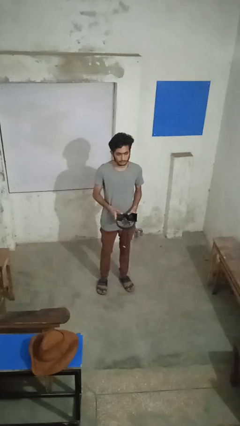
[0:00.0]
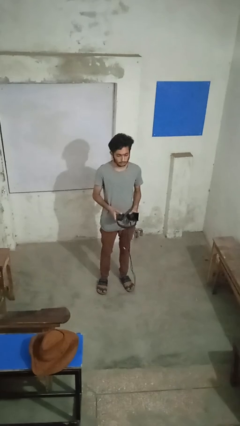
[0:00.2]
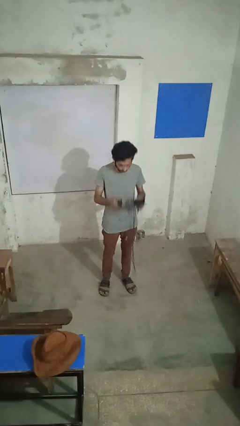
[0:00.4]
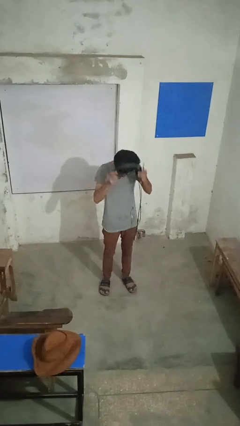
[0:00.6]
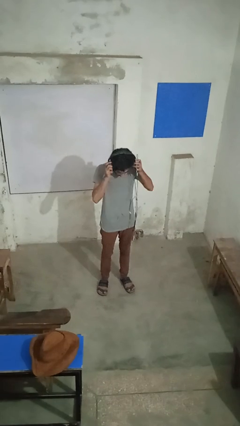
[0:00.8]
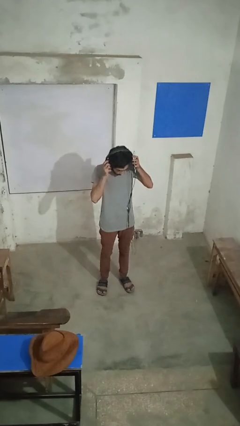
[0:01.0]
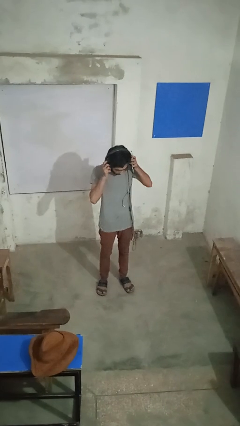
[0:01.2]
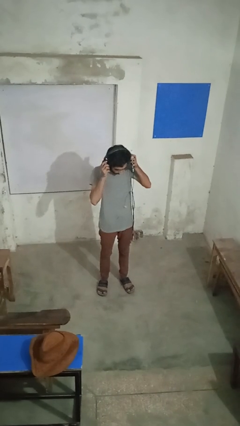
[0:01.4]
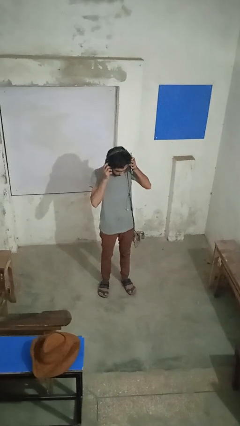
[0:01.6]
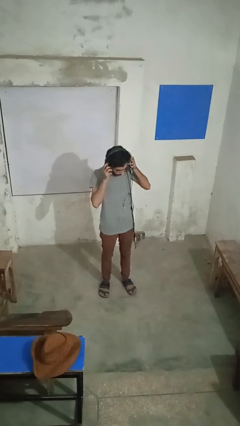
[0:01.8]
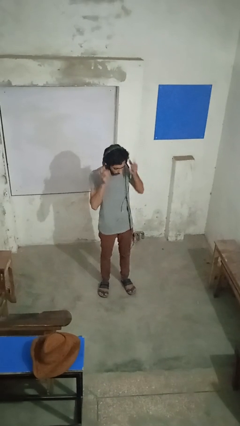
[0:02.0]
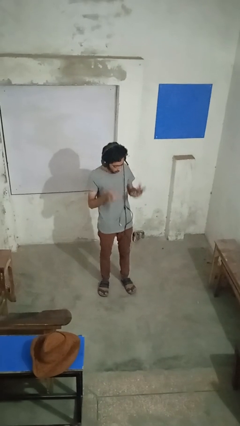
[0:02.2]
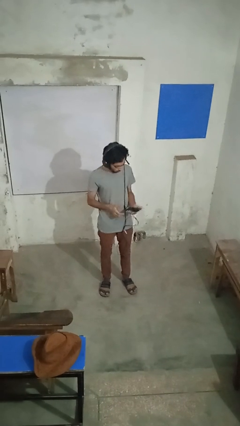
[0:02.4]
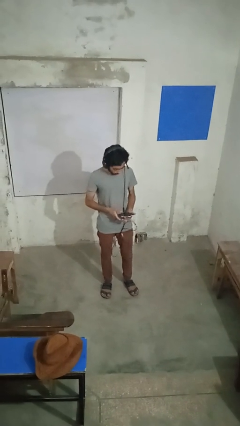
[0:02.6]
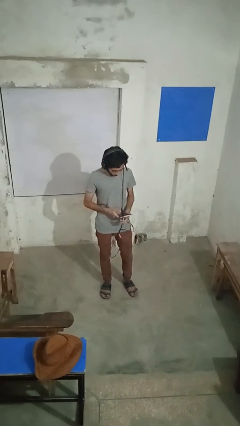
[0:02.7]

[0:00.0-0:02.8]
person puts on headphones

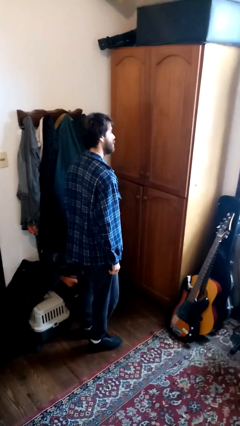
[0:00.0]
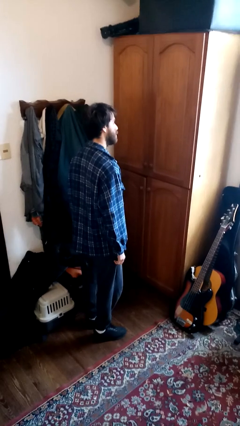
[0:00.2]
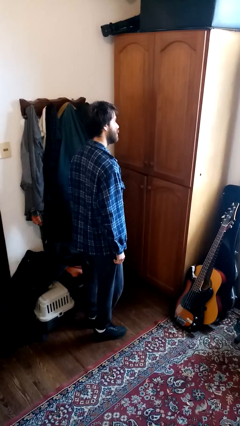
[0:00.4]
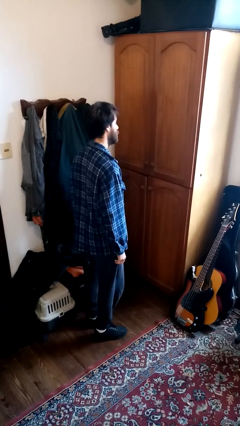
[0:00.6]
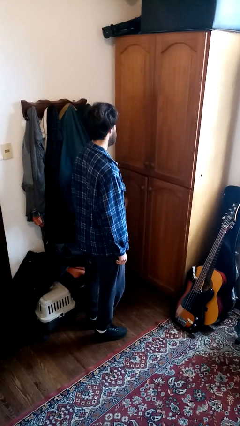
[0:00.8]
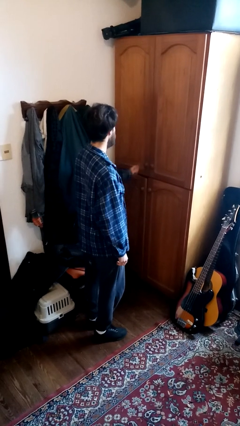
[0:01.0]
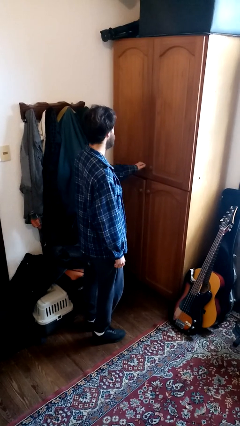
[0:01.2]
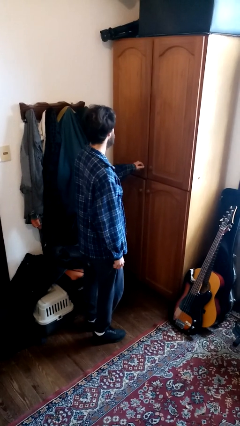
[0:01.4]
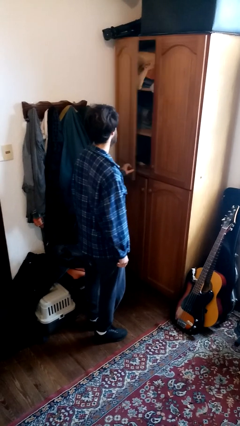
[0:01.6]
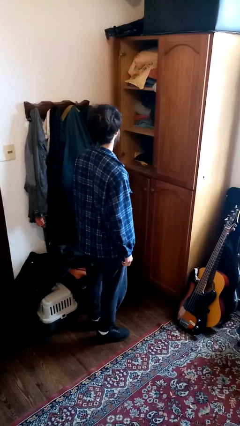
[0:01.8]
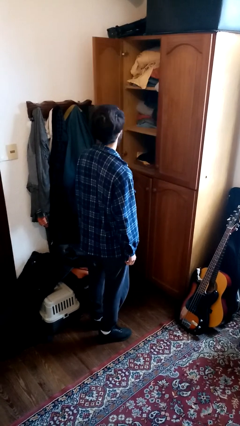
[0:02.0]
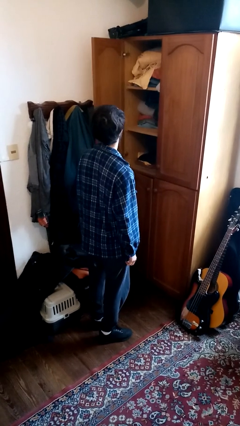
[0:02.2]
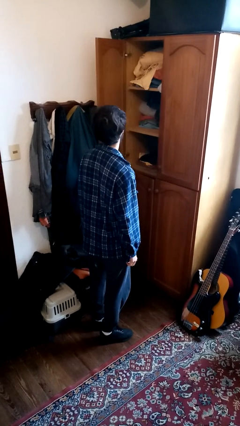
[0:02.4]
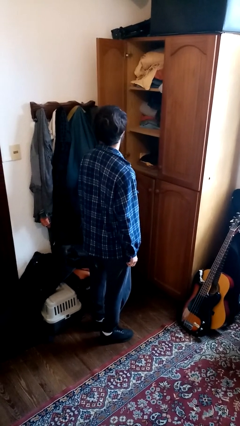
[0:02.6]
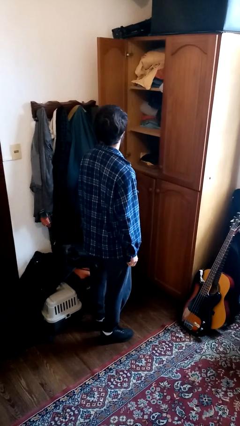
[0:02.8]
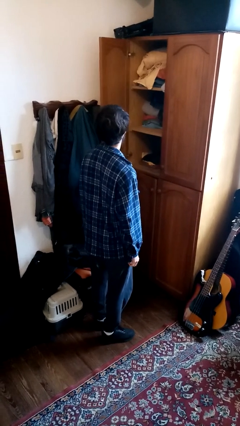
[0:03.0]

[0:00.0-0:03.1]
person opens dresser drawer

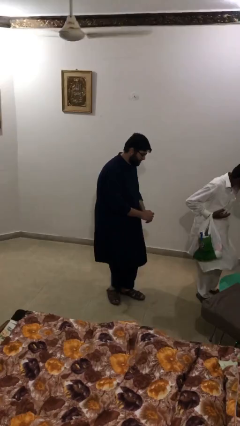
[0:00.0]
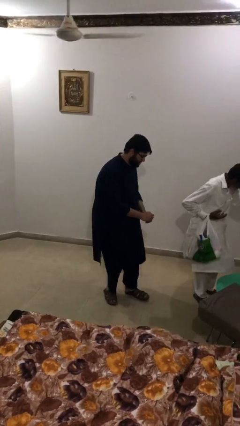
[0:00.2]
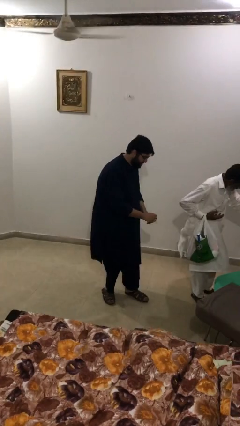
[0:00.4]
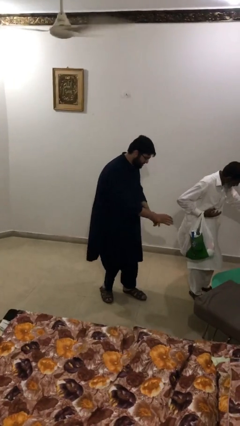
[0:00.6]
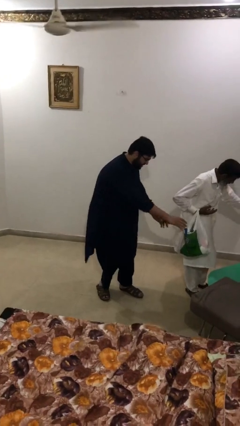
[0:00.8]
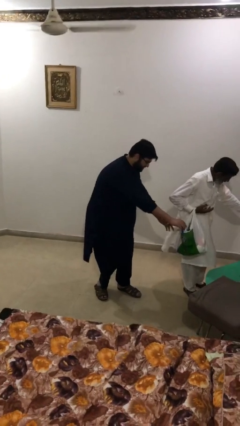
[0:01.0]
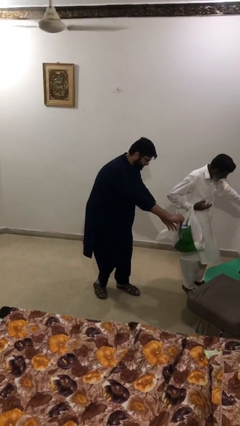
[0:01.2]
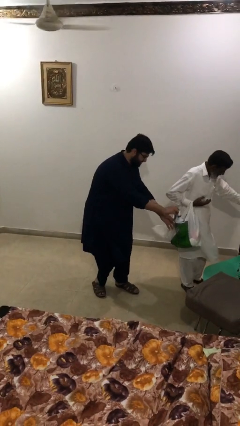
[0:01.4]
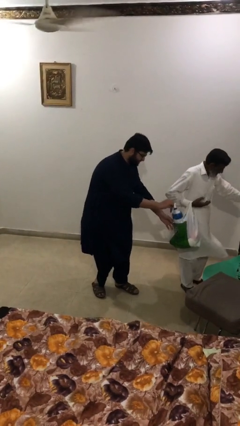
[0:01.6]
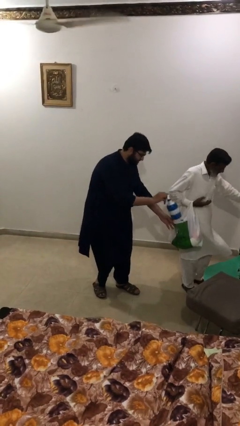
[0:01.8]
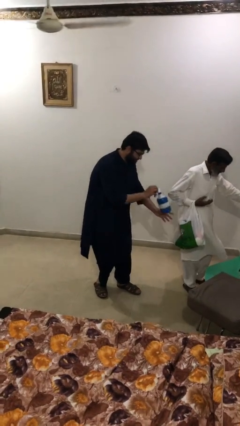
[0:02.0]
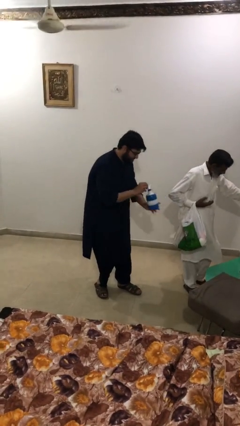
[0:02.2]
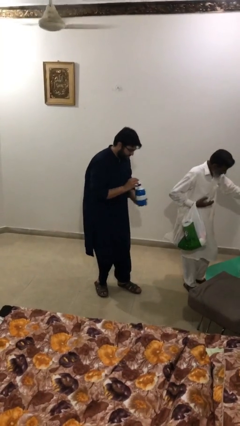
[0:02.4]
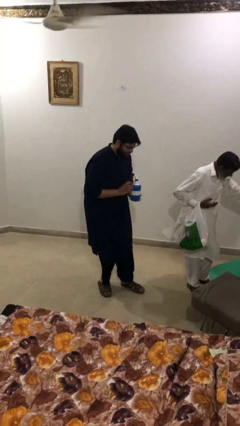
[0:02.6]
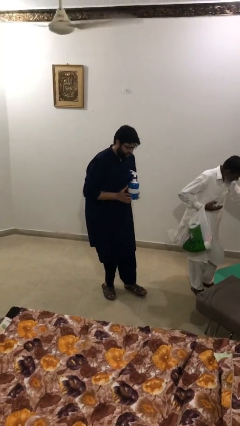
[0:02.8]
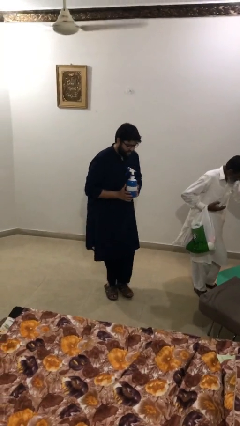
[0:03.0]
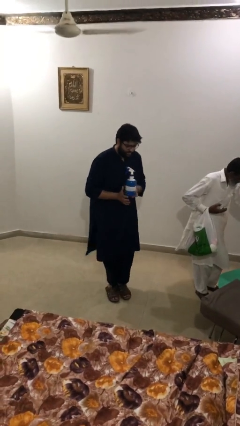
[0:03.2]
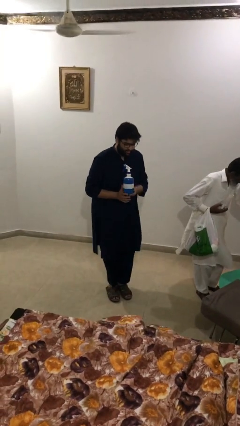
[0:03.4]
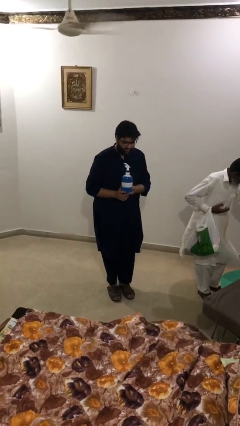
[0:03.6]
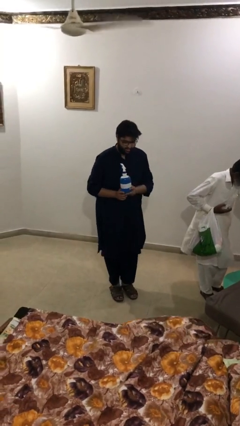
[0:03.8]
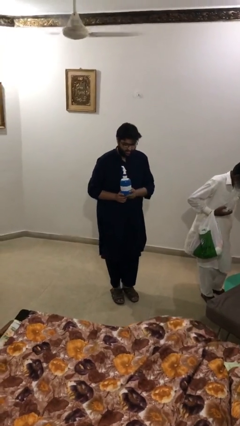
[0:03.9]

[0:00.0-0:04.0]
person steals object from person

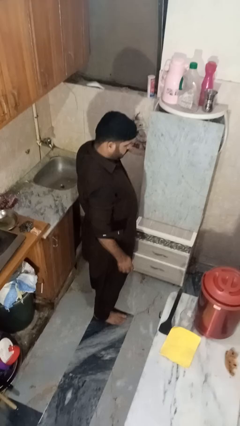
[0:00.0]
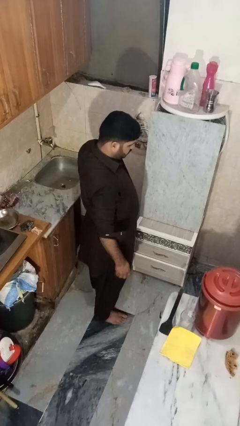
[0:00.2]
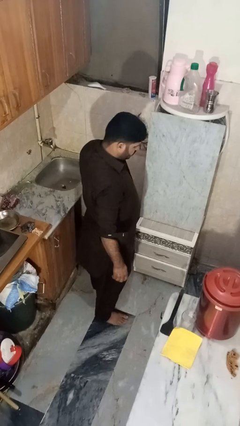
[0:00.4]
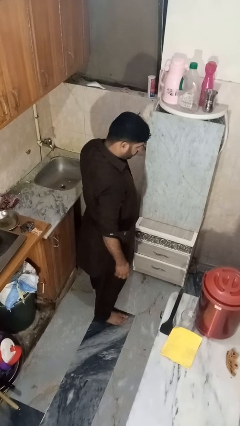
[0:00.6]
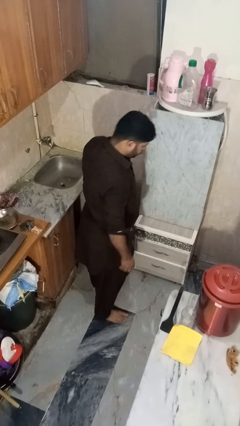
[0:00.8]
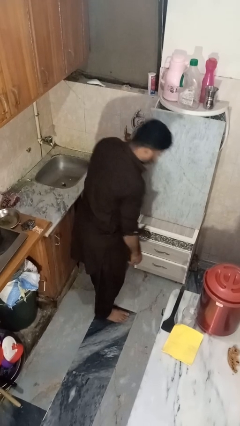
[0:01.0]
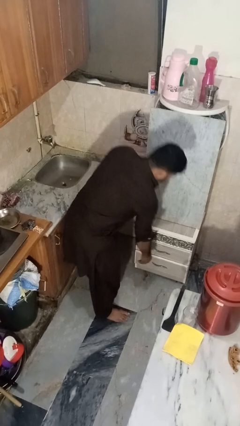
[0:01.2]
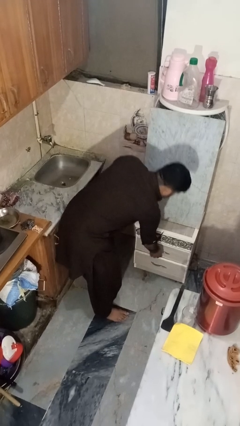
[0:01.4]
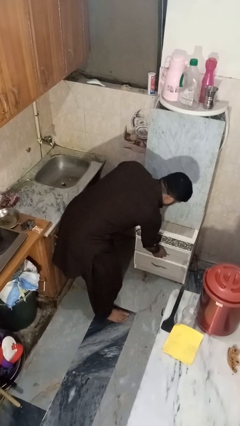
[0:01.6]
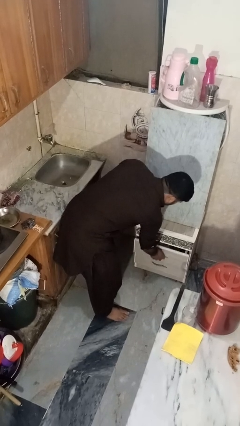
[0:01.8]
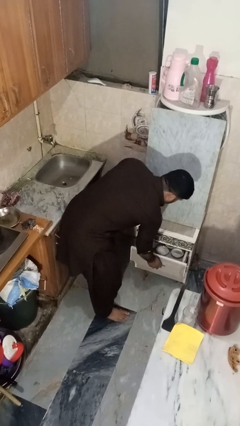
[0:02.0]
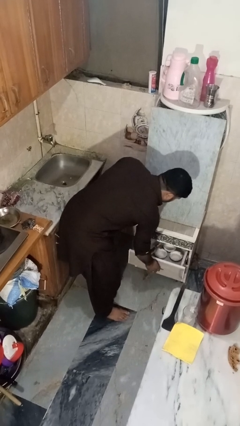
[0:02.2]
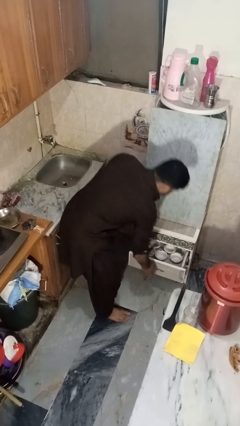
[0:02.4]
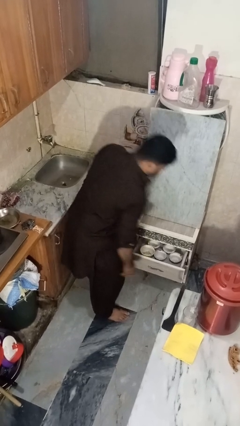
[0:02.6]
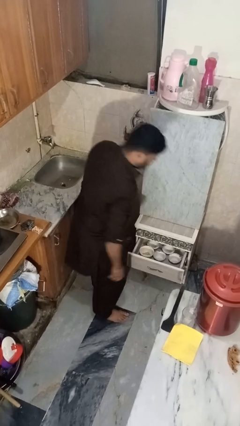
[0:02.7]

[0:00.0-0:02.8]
person opens kitchen drawer

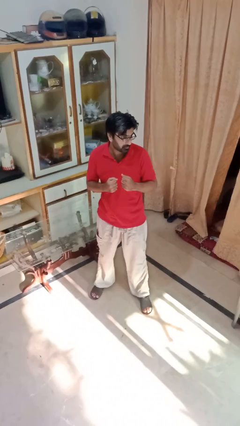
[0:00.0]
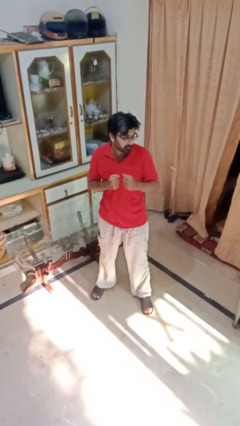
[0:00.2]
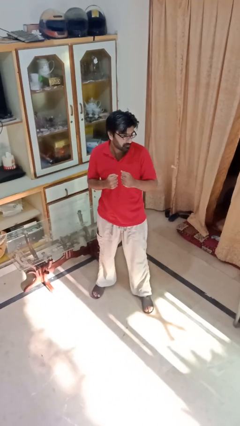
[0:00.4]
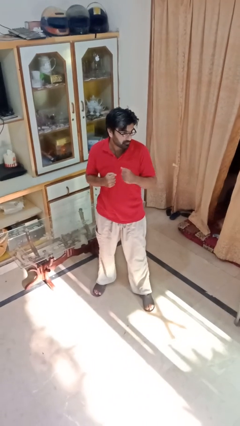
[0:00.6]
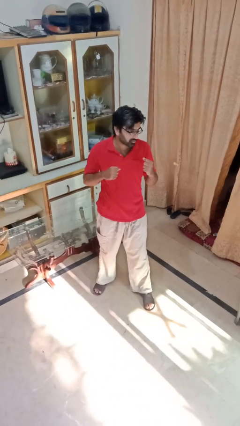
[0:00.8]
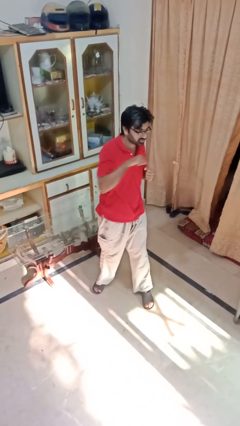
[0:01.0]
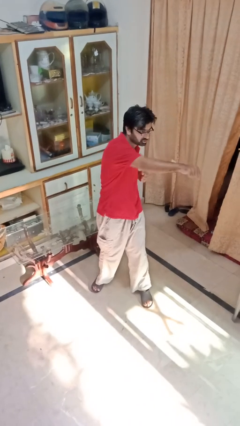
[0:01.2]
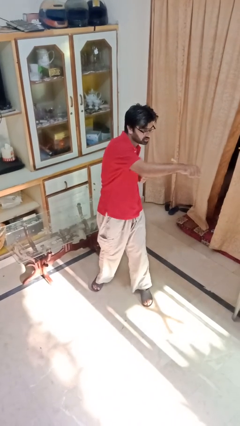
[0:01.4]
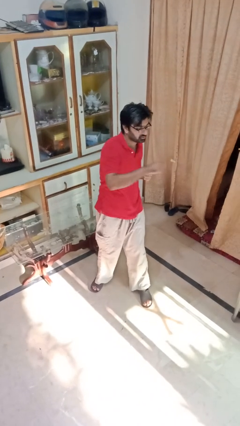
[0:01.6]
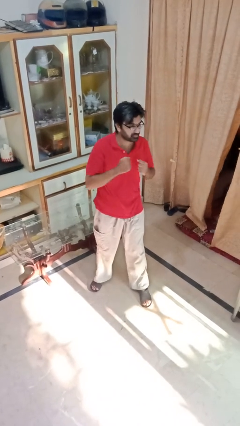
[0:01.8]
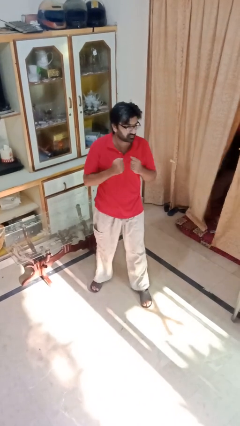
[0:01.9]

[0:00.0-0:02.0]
person punches

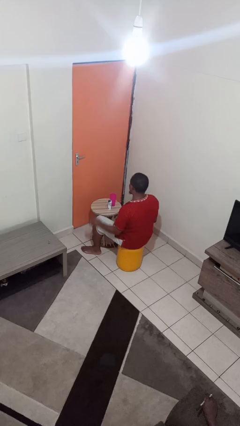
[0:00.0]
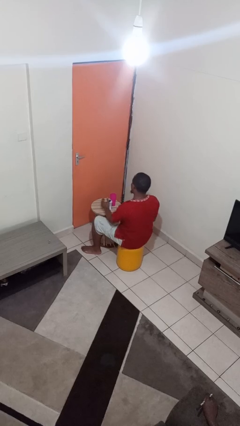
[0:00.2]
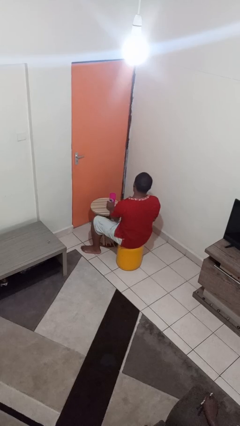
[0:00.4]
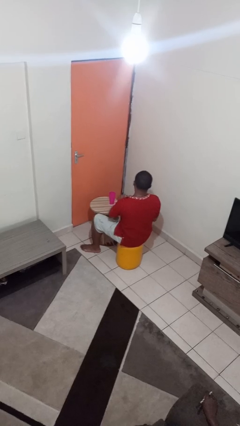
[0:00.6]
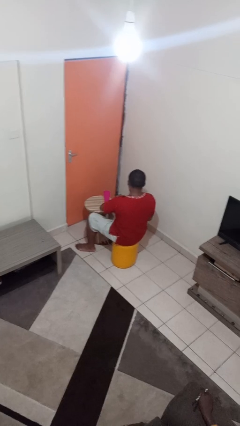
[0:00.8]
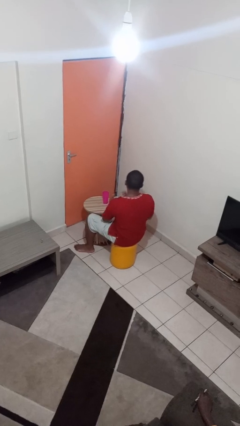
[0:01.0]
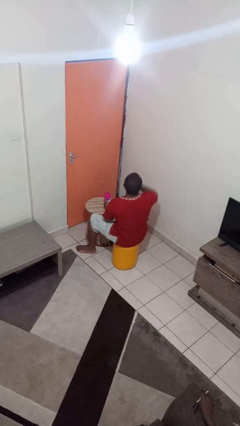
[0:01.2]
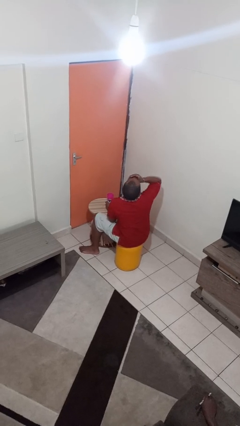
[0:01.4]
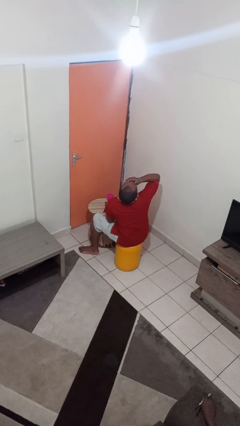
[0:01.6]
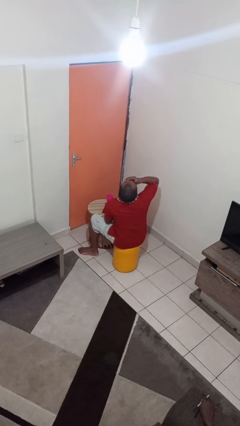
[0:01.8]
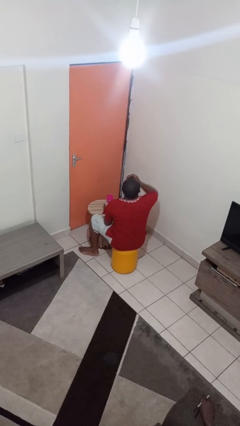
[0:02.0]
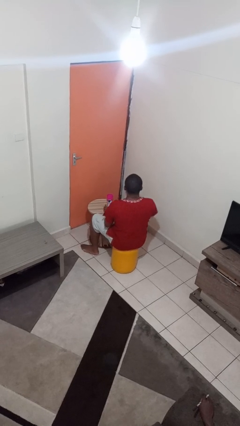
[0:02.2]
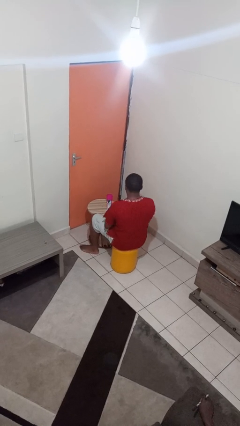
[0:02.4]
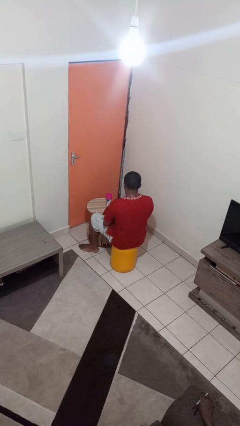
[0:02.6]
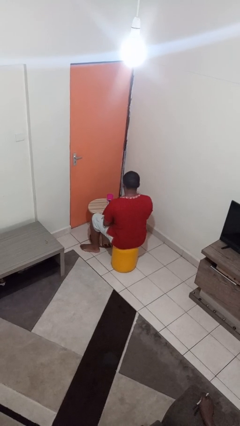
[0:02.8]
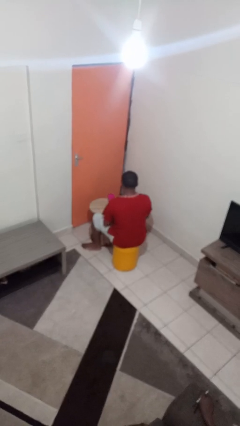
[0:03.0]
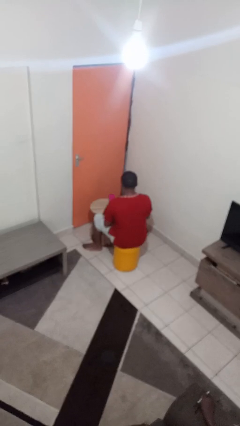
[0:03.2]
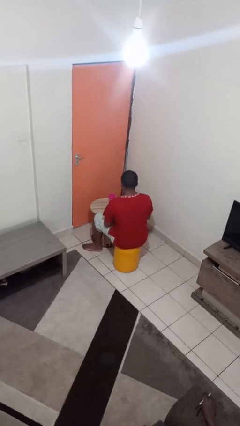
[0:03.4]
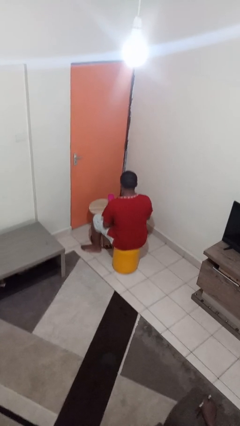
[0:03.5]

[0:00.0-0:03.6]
person takes medicine pills
